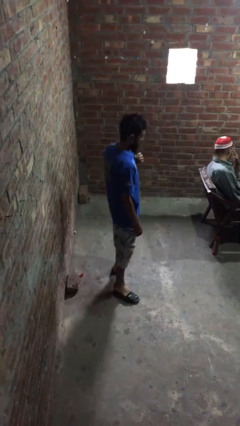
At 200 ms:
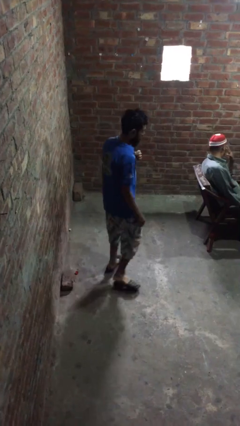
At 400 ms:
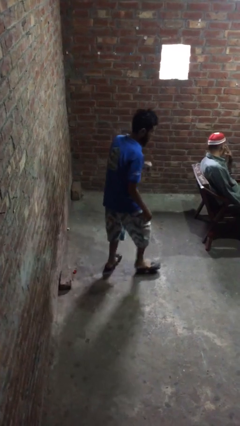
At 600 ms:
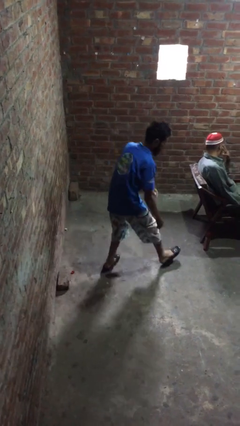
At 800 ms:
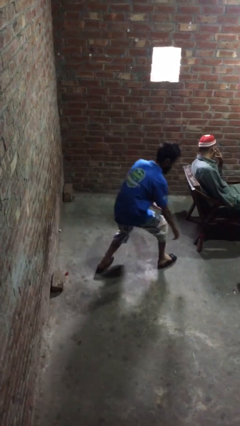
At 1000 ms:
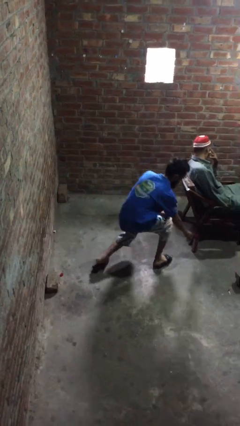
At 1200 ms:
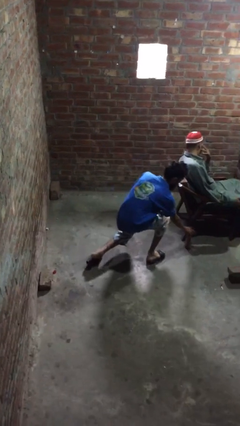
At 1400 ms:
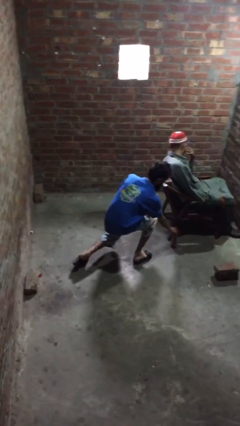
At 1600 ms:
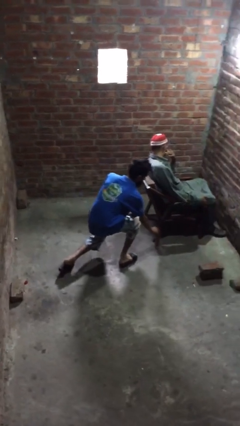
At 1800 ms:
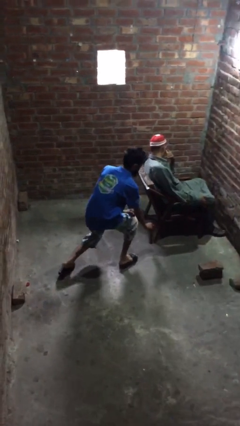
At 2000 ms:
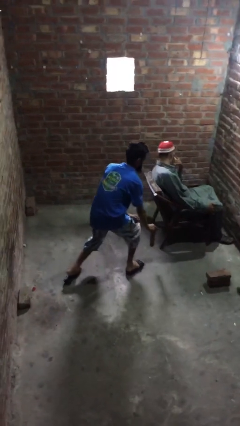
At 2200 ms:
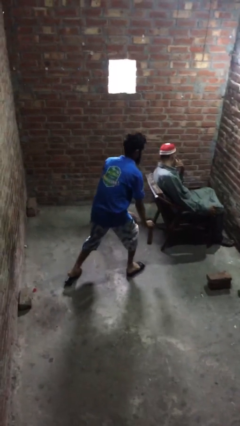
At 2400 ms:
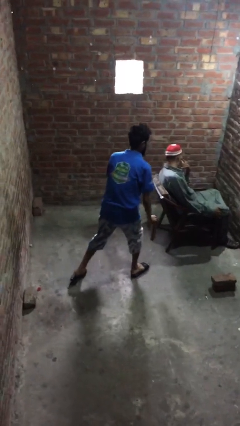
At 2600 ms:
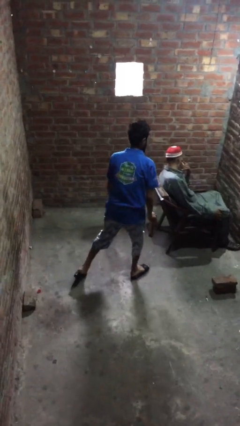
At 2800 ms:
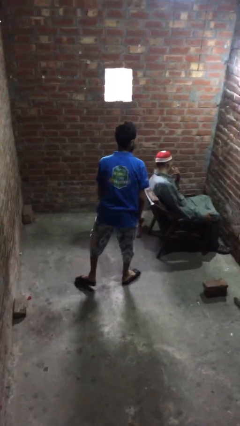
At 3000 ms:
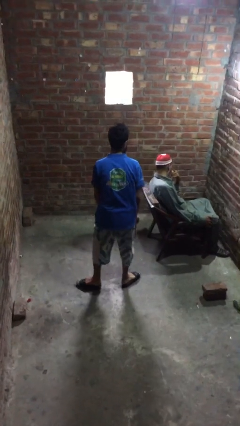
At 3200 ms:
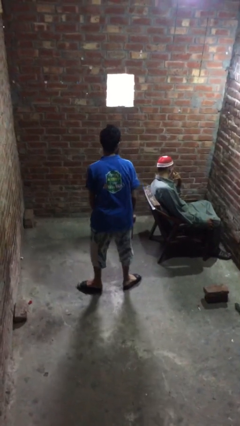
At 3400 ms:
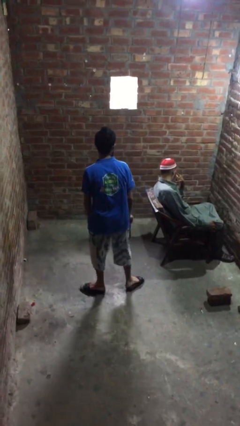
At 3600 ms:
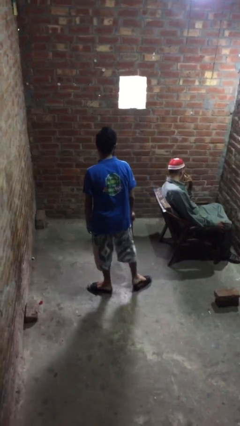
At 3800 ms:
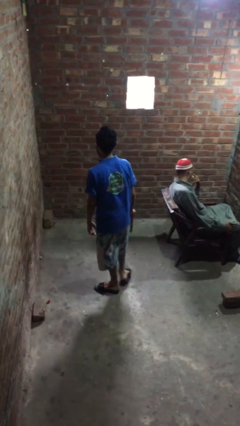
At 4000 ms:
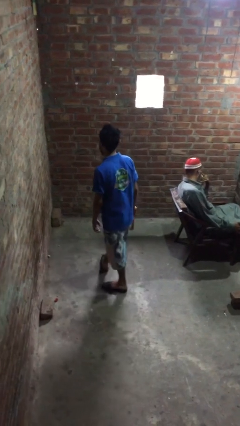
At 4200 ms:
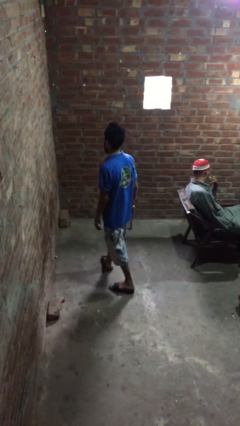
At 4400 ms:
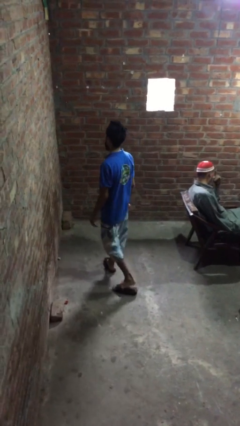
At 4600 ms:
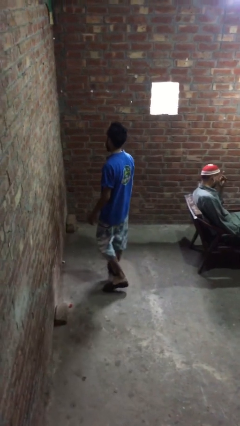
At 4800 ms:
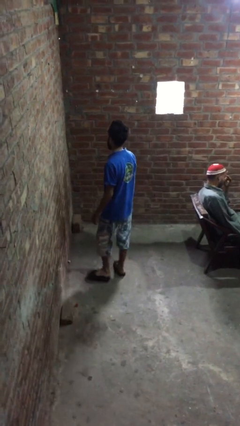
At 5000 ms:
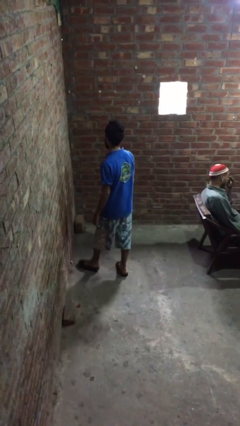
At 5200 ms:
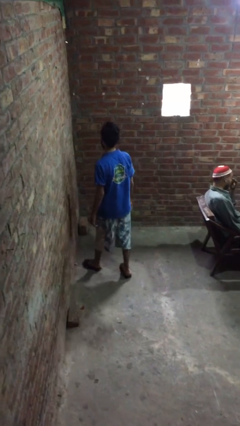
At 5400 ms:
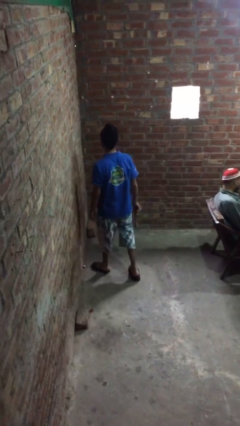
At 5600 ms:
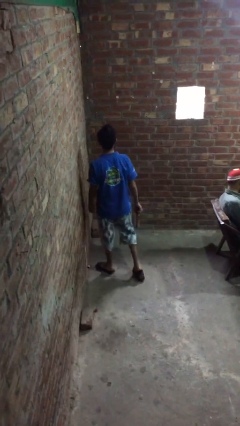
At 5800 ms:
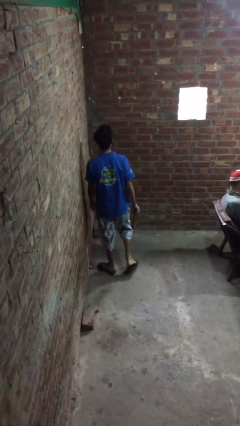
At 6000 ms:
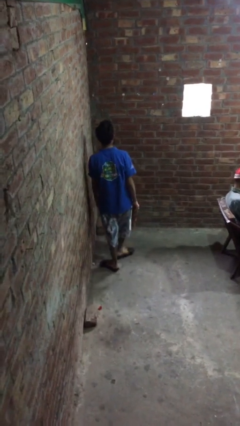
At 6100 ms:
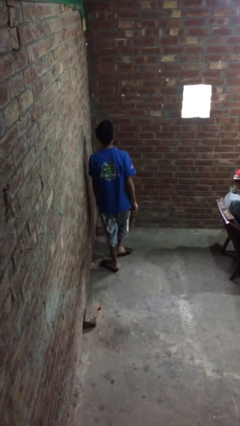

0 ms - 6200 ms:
person steals object from person

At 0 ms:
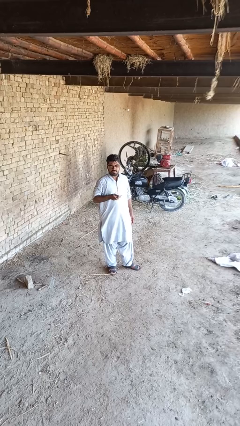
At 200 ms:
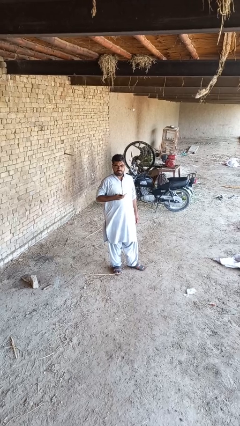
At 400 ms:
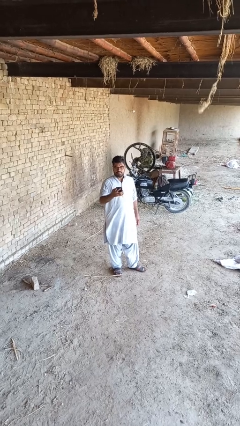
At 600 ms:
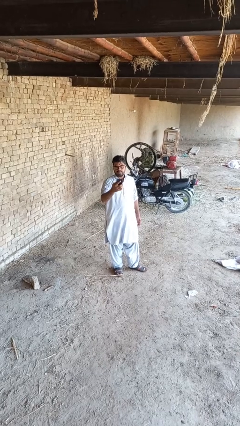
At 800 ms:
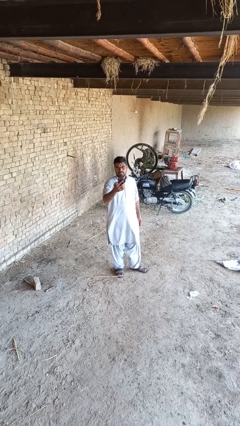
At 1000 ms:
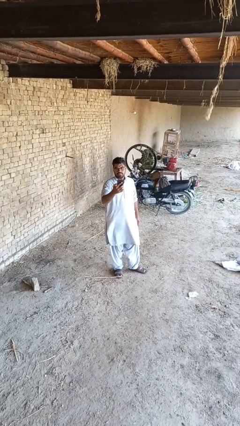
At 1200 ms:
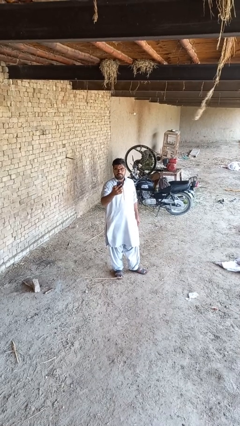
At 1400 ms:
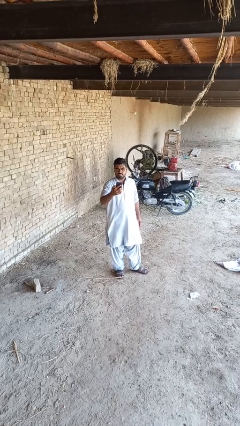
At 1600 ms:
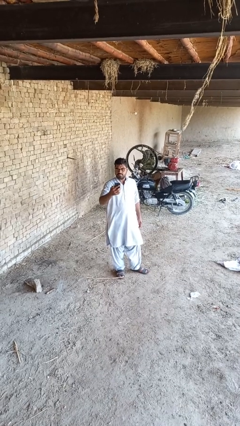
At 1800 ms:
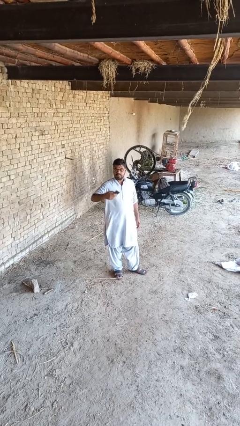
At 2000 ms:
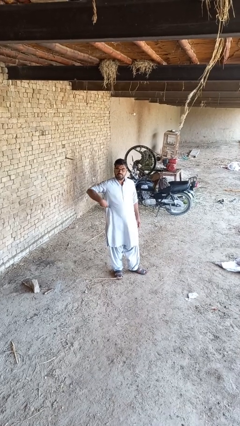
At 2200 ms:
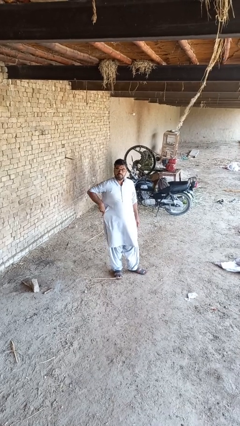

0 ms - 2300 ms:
person puts phone into pocket

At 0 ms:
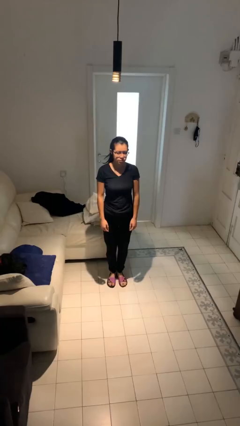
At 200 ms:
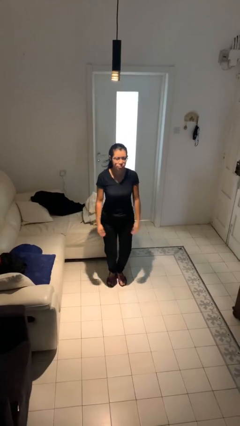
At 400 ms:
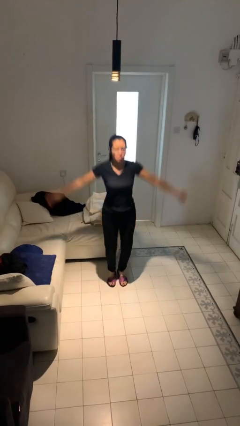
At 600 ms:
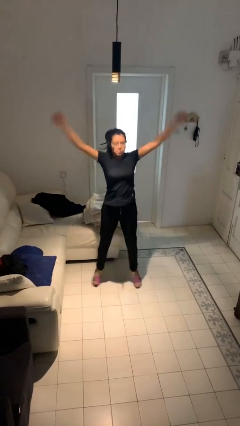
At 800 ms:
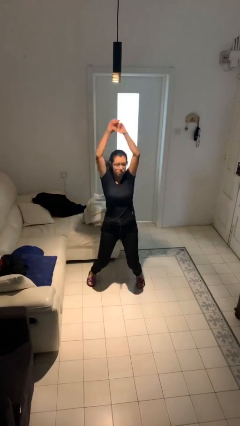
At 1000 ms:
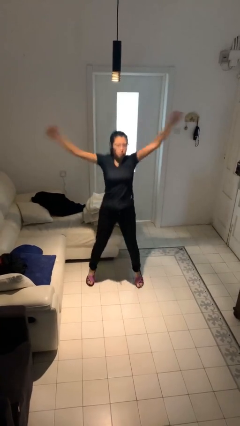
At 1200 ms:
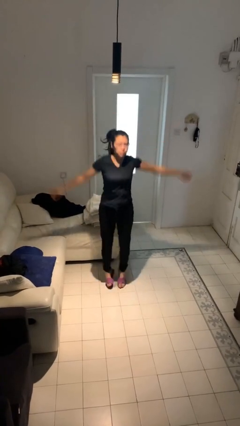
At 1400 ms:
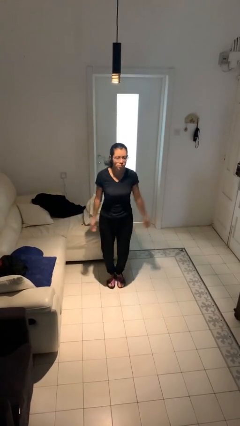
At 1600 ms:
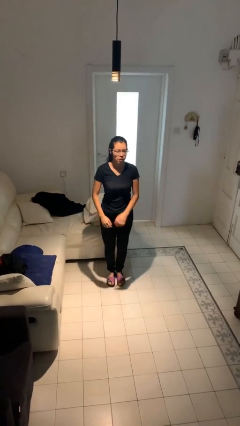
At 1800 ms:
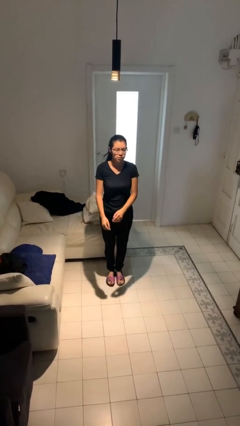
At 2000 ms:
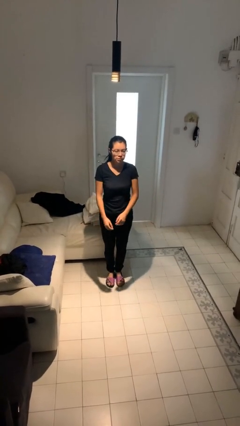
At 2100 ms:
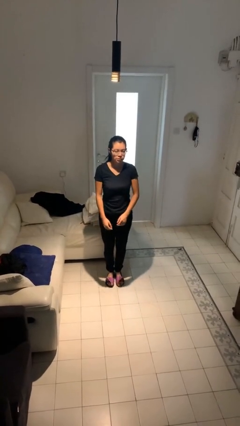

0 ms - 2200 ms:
person jumps

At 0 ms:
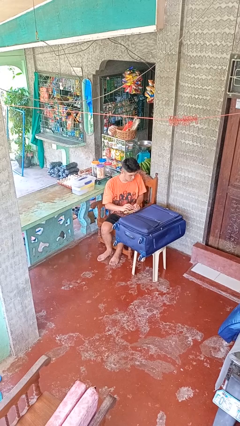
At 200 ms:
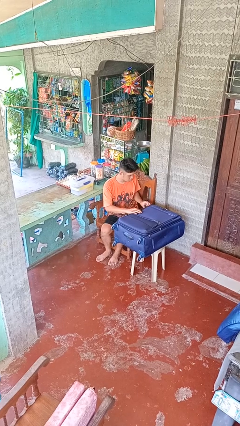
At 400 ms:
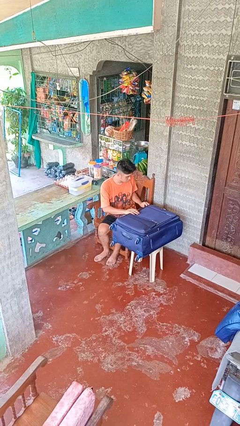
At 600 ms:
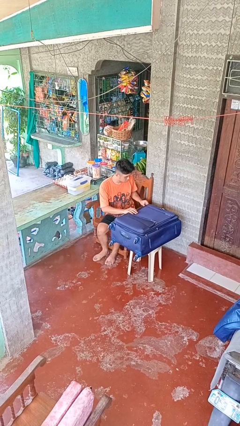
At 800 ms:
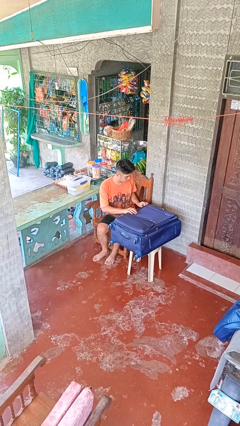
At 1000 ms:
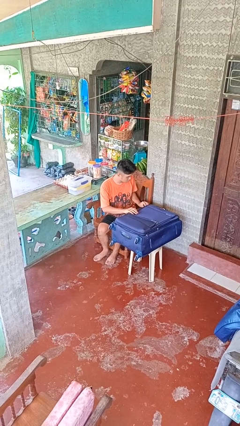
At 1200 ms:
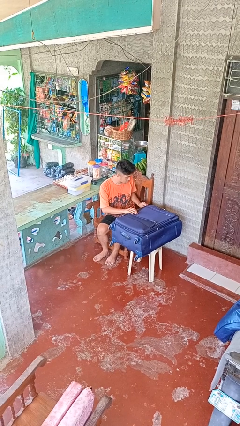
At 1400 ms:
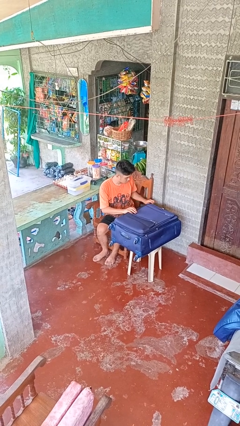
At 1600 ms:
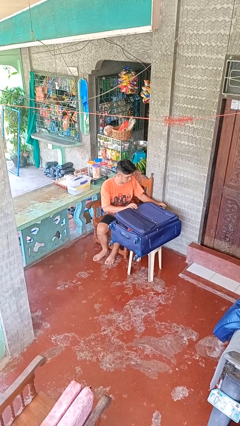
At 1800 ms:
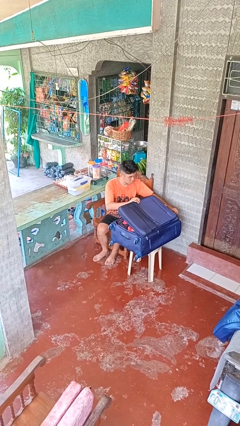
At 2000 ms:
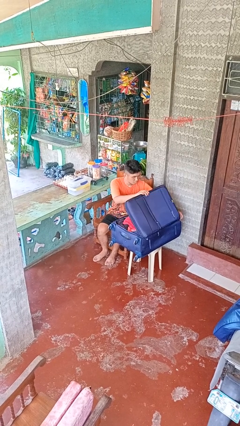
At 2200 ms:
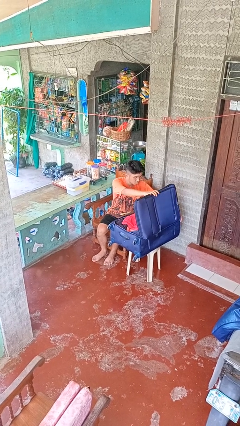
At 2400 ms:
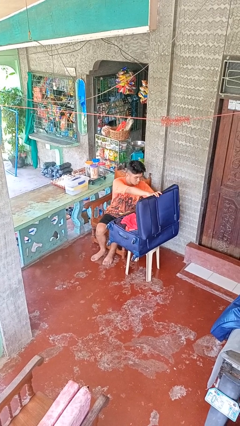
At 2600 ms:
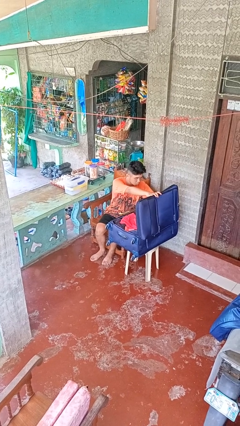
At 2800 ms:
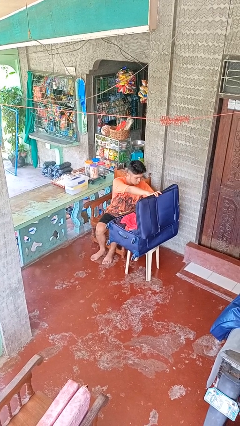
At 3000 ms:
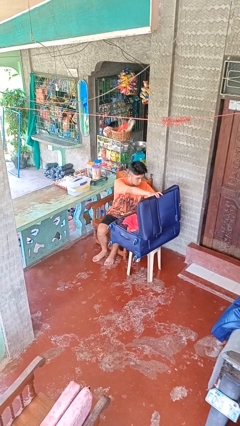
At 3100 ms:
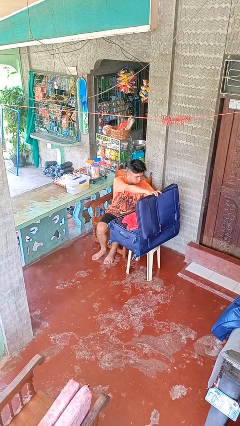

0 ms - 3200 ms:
person opens suitcase

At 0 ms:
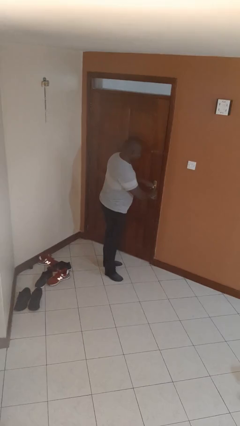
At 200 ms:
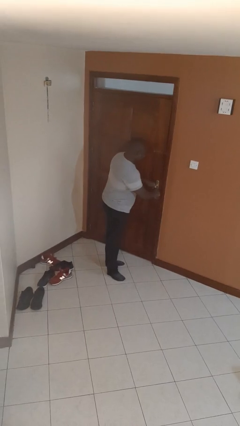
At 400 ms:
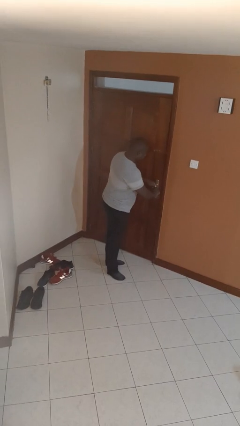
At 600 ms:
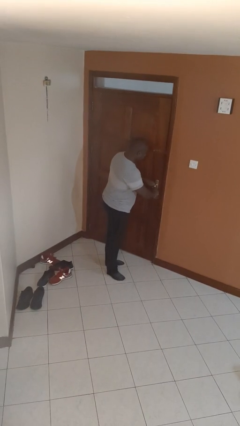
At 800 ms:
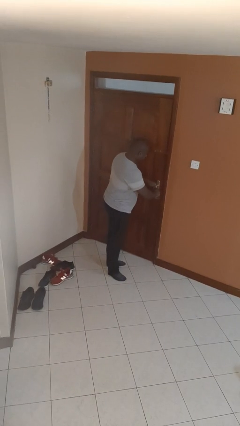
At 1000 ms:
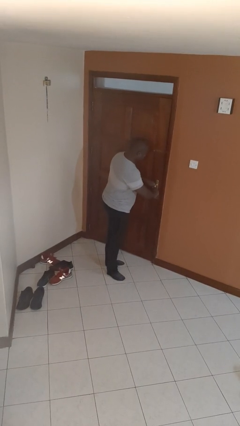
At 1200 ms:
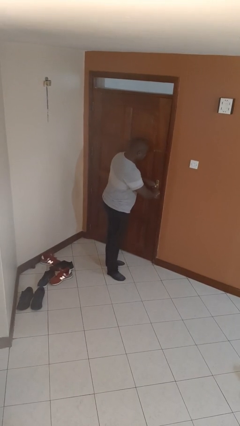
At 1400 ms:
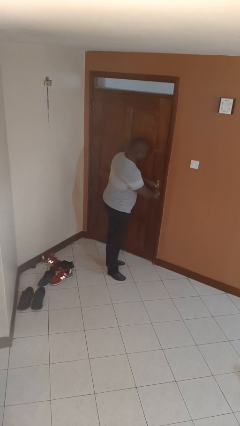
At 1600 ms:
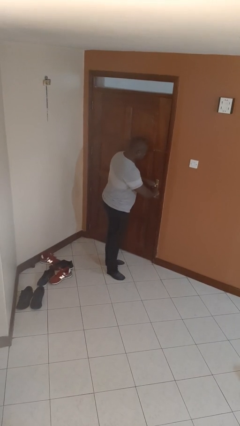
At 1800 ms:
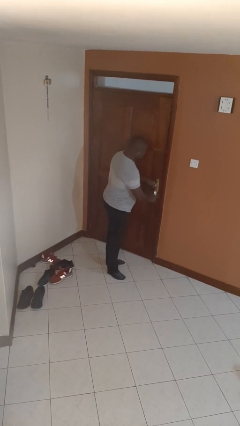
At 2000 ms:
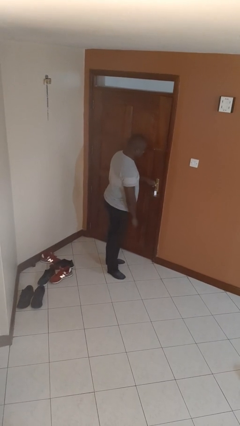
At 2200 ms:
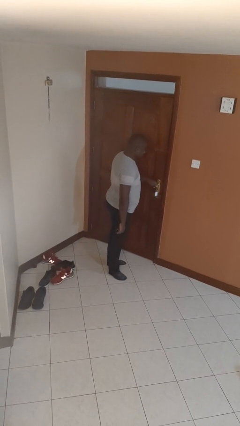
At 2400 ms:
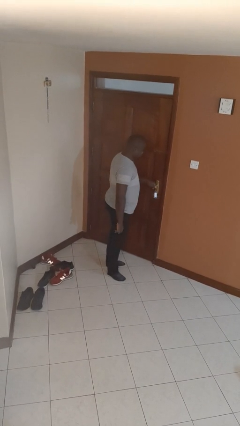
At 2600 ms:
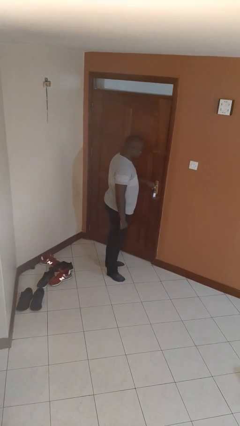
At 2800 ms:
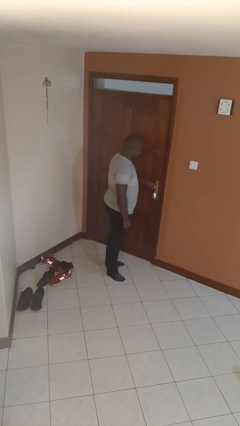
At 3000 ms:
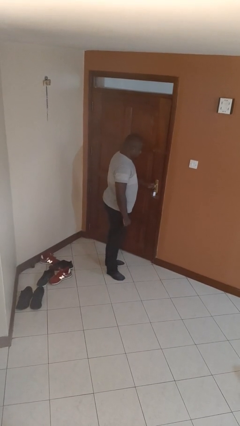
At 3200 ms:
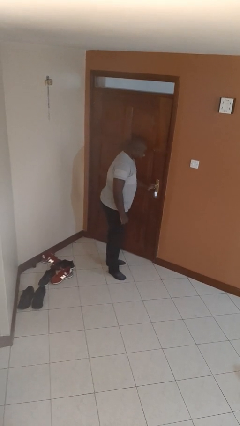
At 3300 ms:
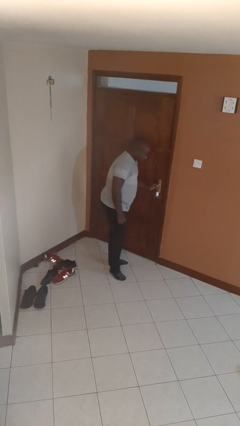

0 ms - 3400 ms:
person unlocks door with keys

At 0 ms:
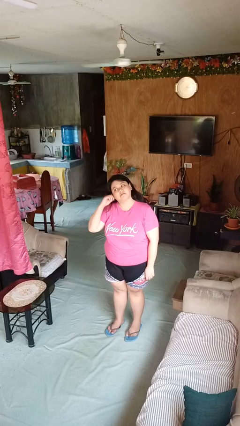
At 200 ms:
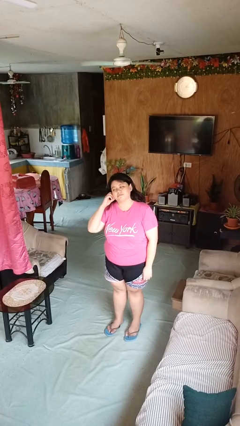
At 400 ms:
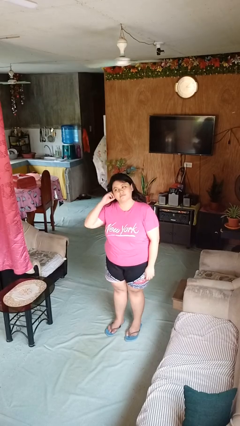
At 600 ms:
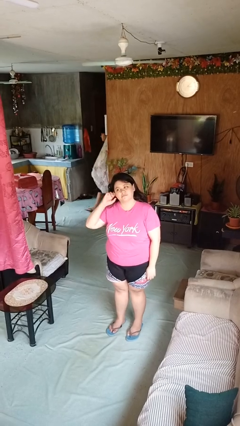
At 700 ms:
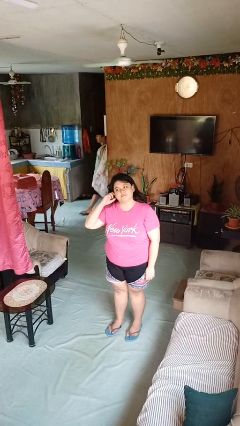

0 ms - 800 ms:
person touches earlobe
